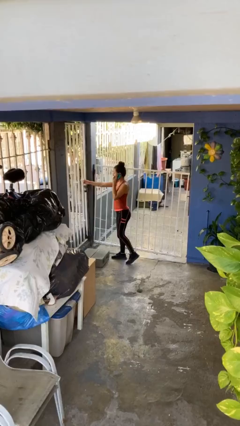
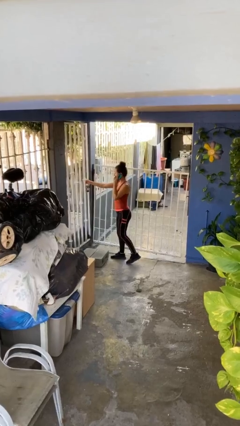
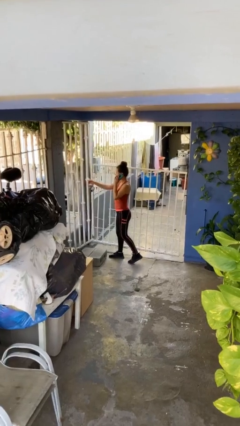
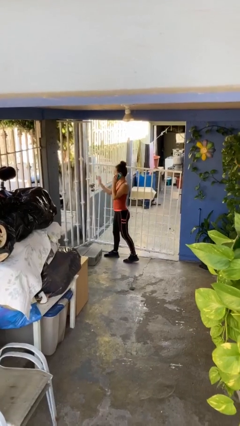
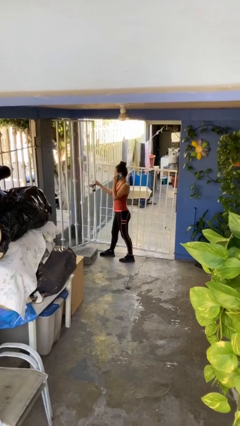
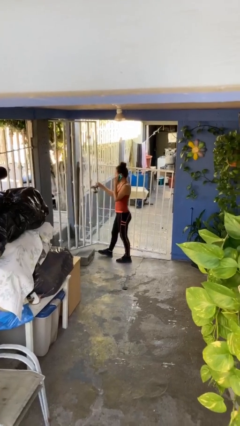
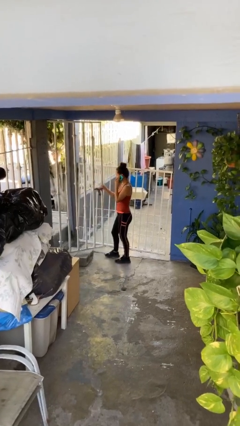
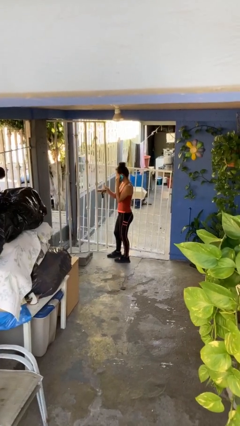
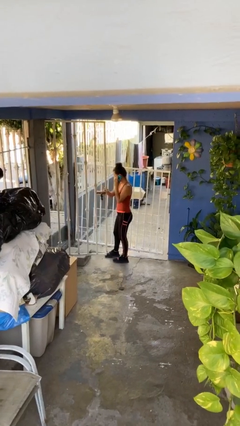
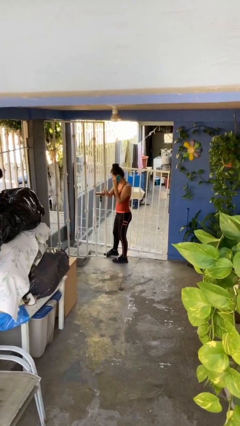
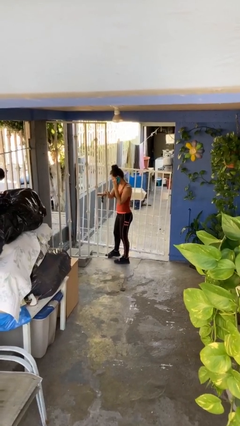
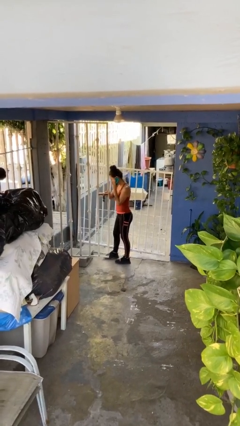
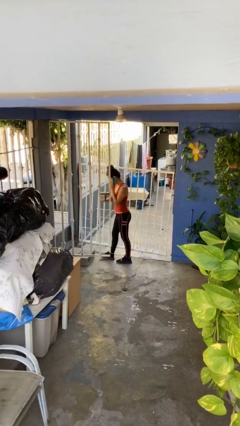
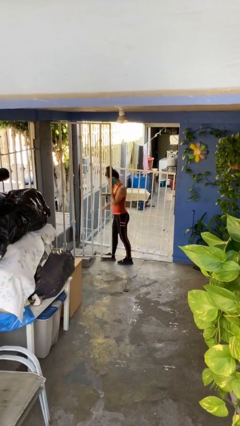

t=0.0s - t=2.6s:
person opens facility door

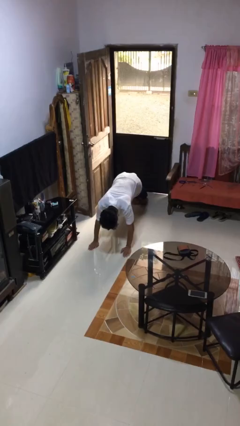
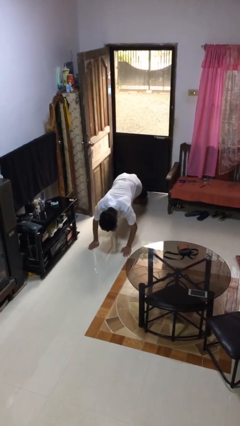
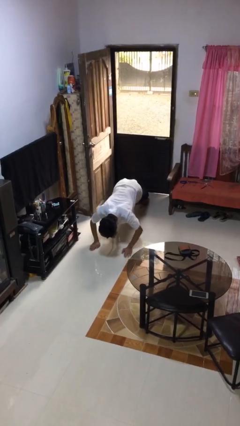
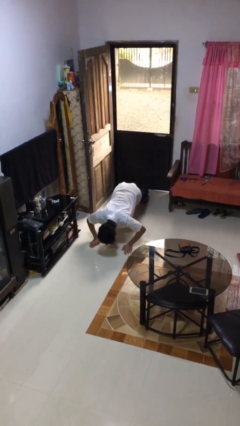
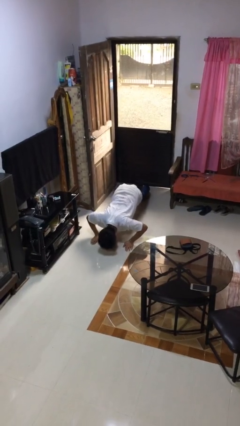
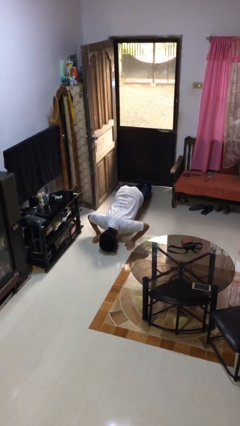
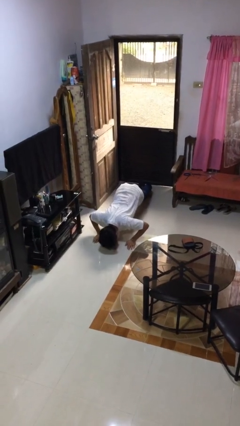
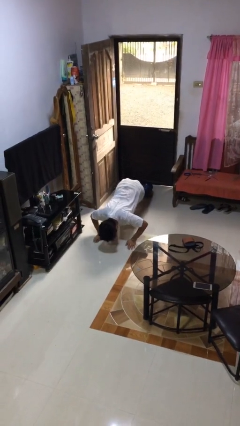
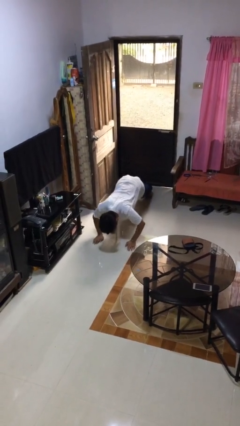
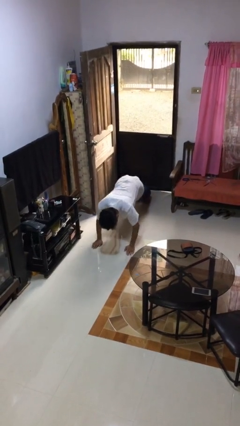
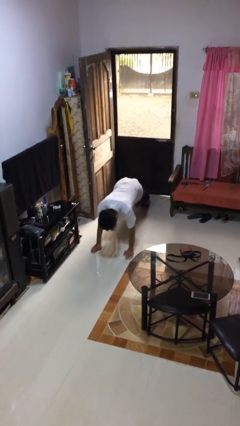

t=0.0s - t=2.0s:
person exercises with pushup

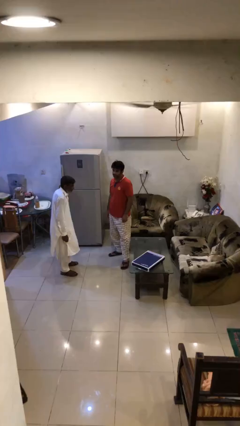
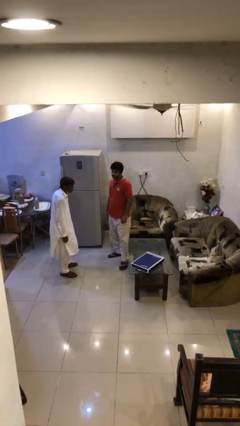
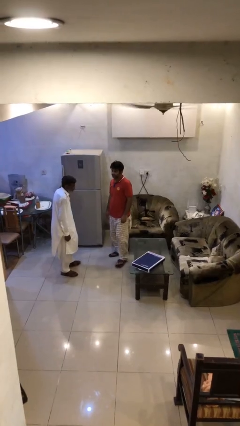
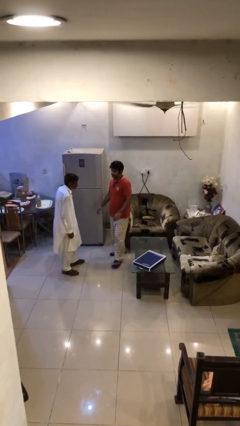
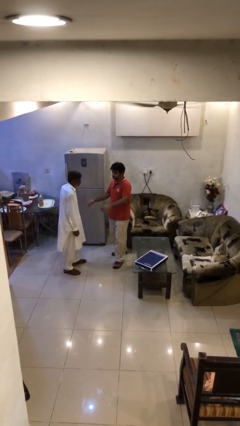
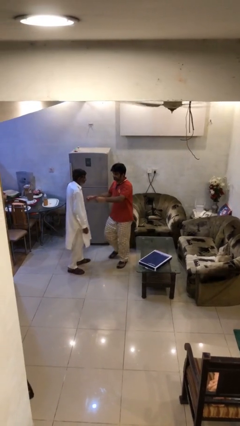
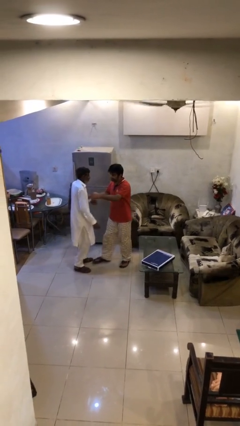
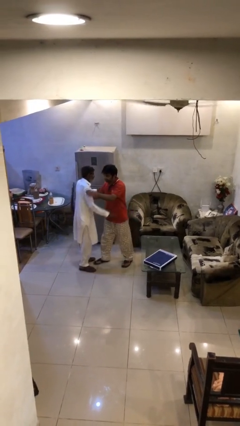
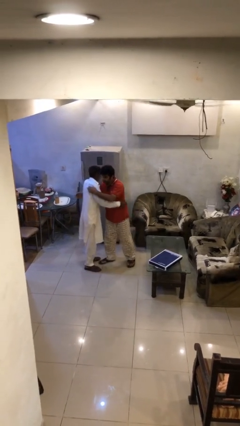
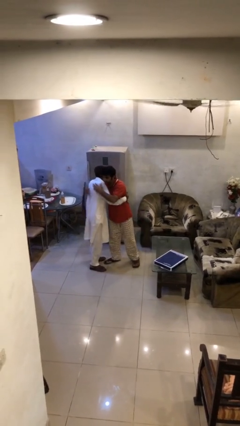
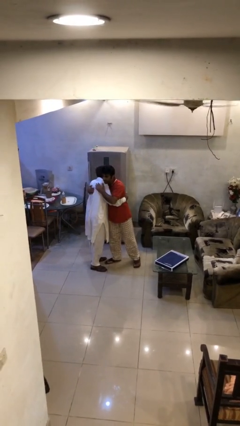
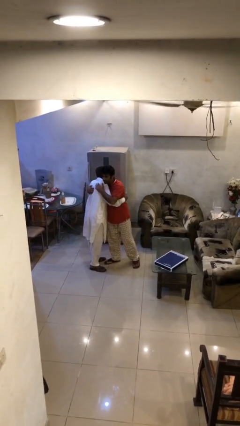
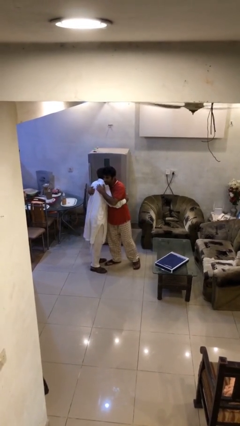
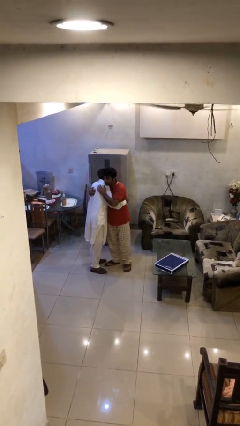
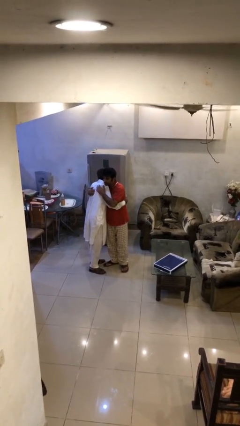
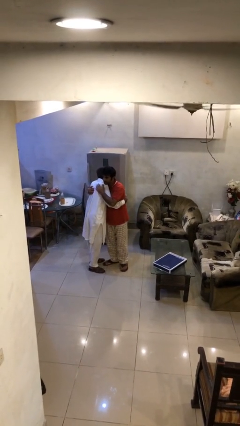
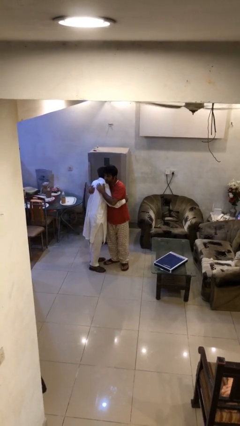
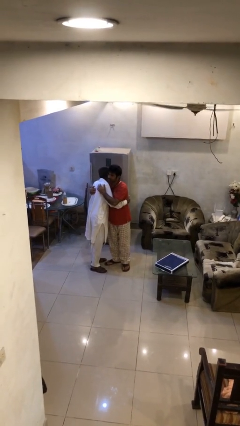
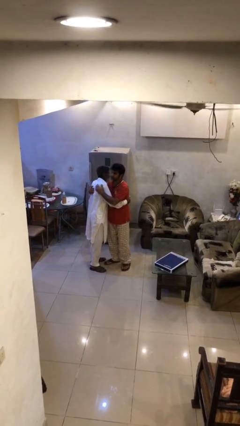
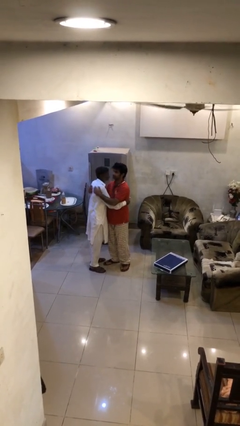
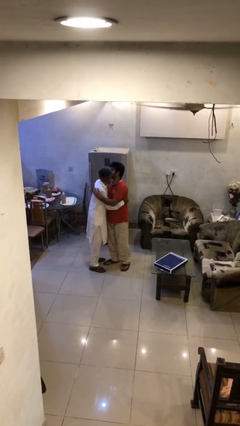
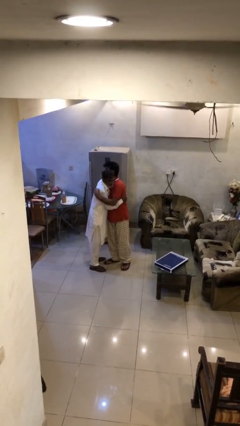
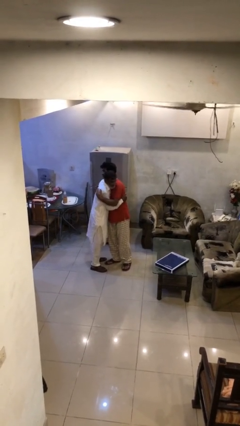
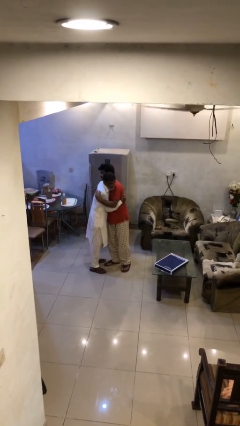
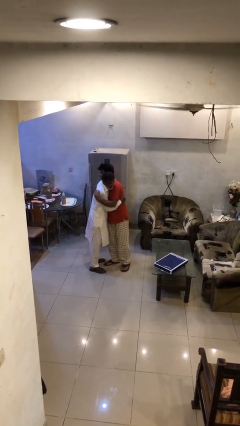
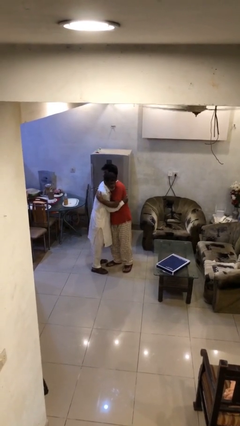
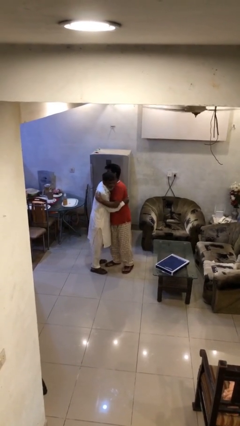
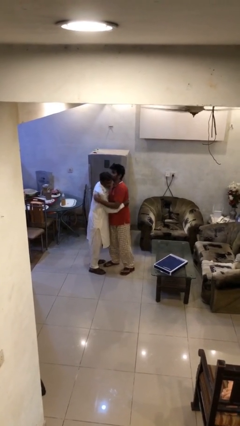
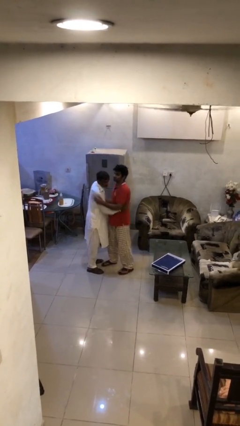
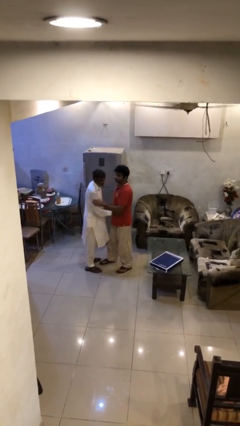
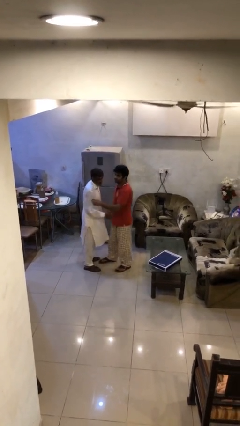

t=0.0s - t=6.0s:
person embraces person

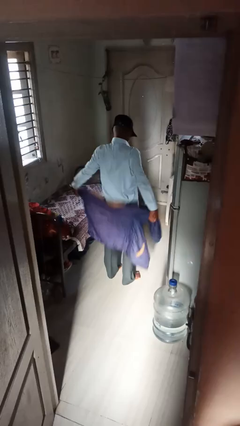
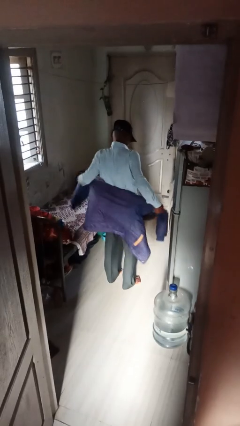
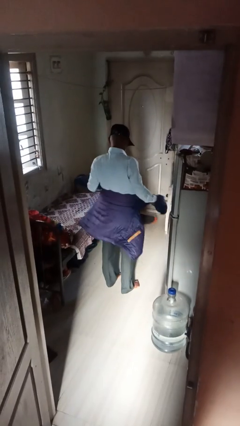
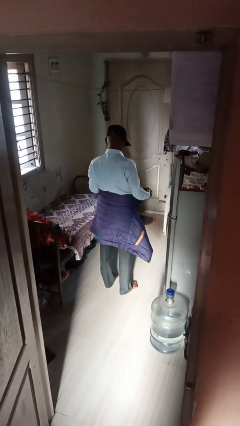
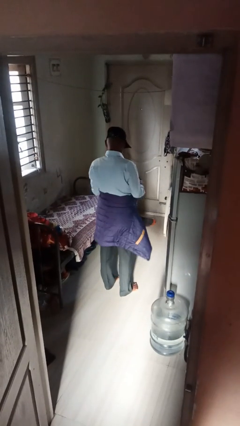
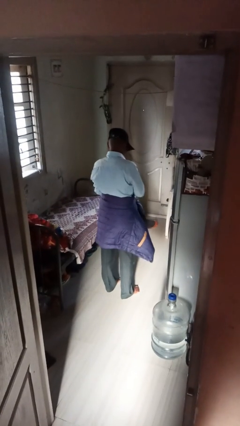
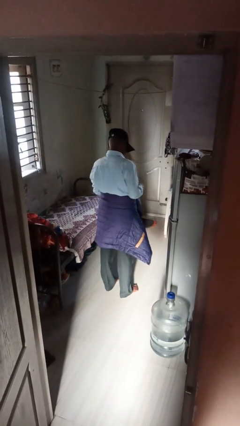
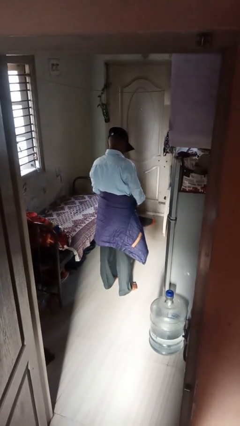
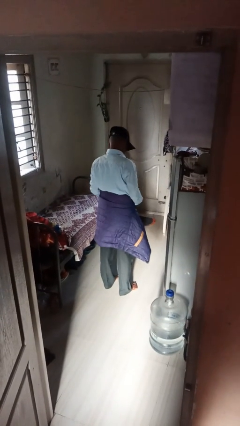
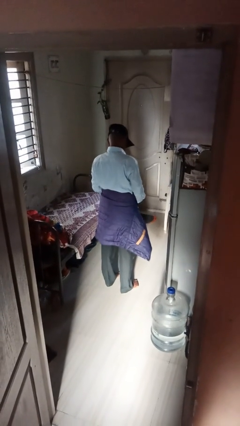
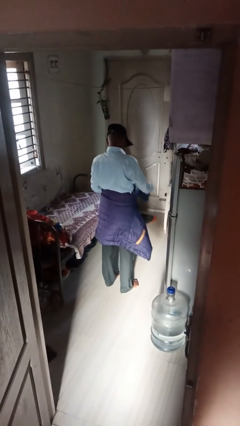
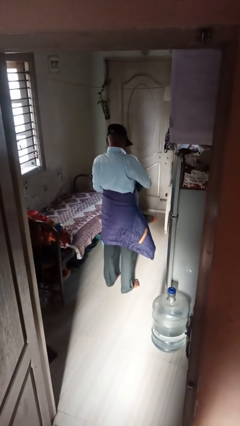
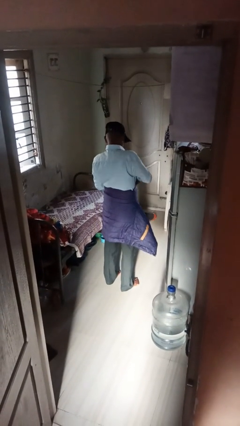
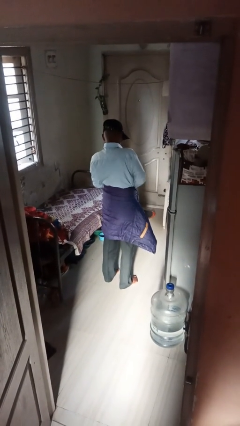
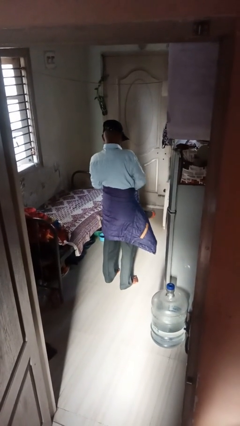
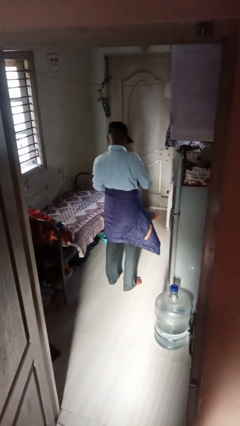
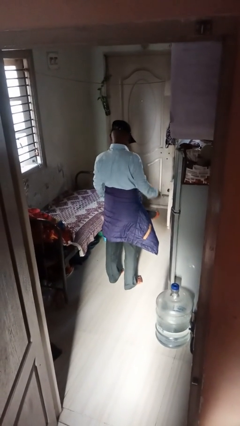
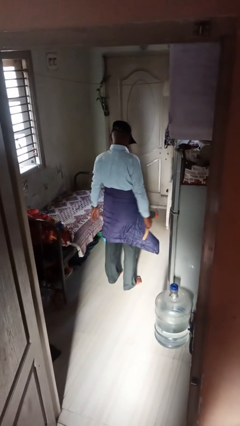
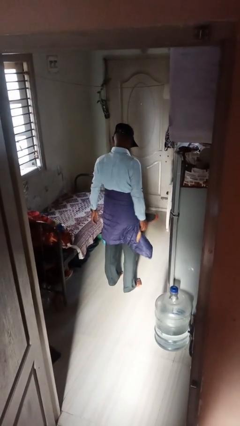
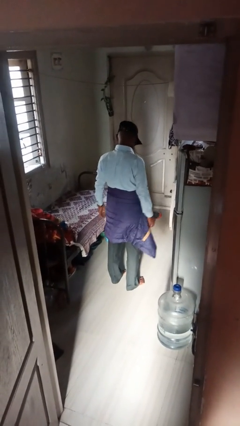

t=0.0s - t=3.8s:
person ties jacket around waist

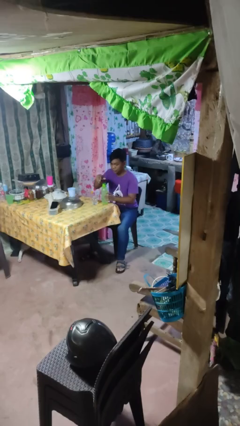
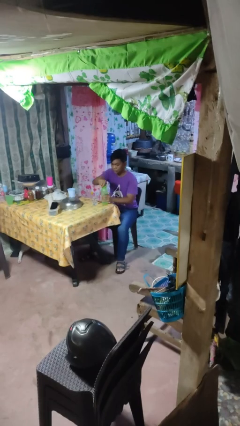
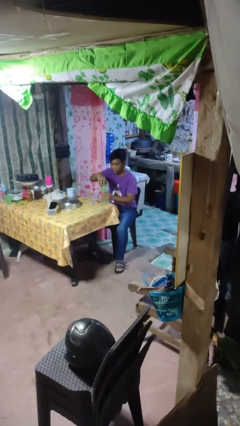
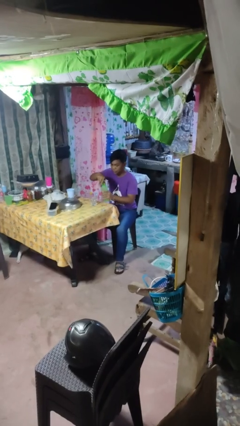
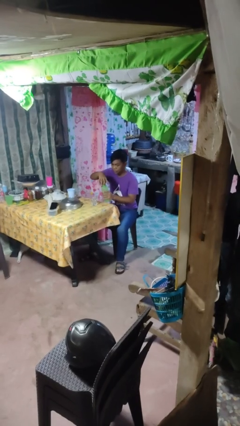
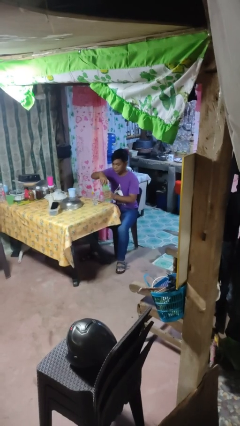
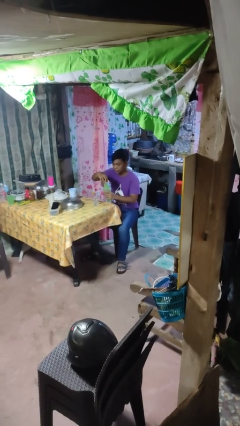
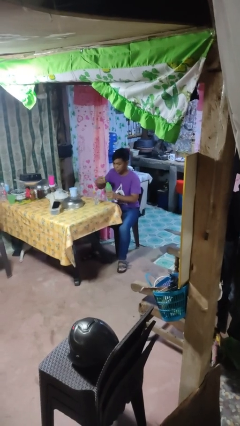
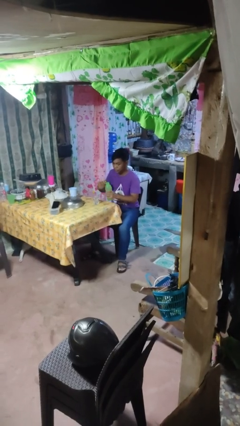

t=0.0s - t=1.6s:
person unscrews lid from bottle

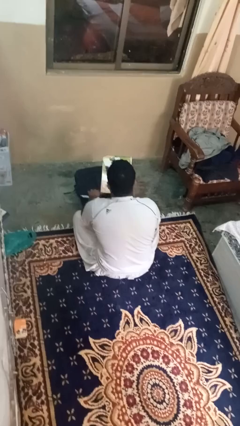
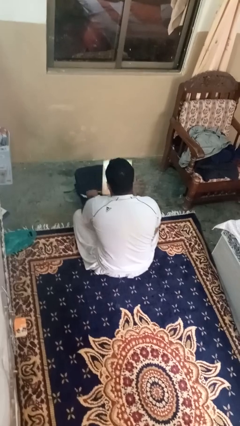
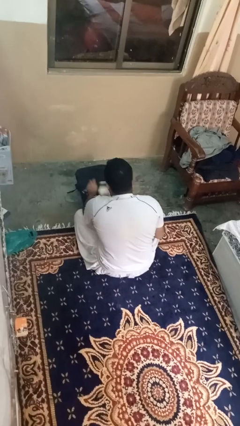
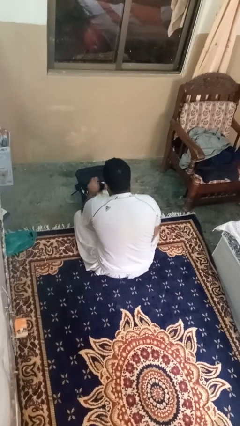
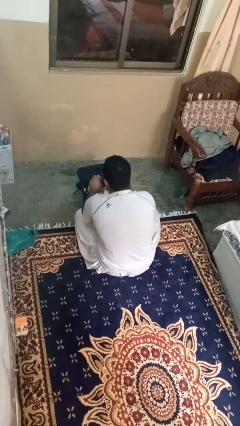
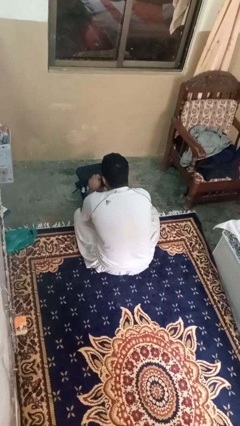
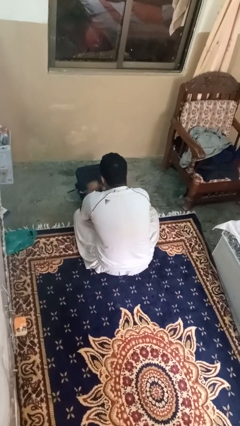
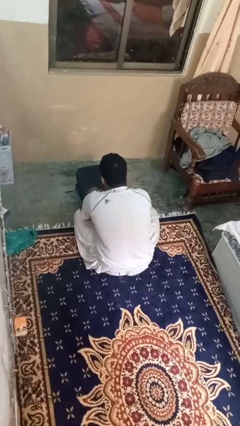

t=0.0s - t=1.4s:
person puts object into bag
